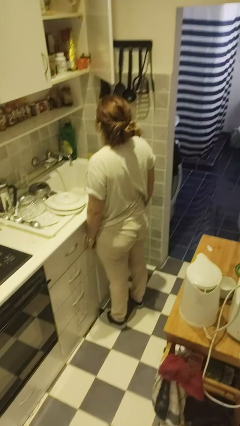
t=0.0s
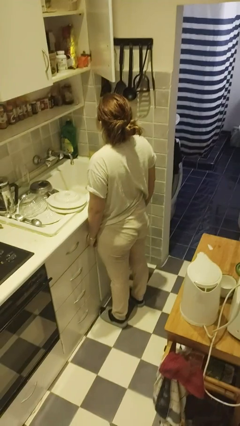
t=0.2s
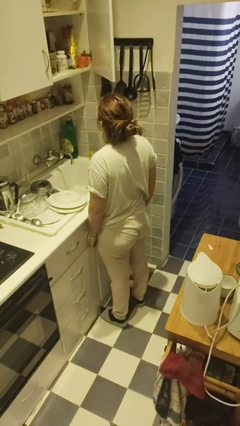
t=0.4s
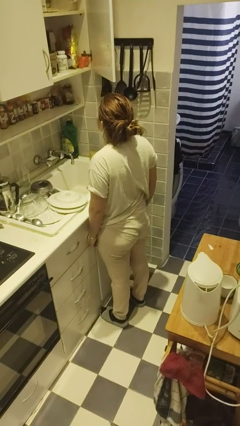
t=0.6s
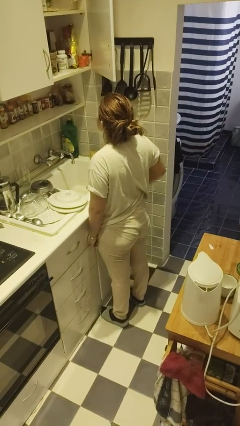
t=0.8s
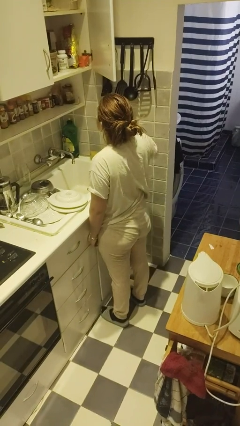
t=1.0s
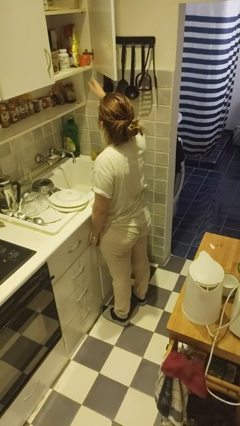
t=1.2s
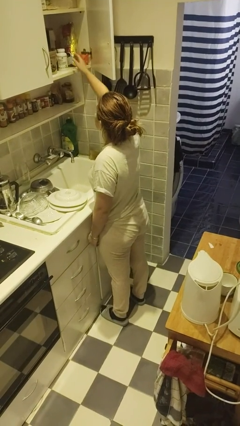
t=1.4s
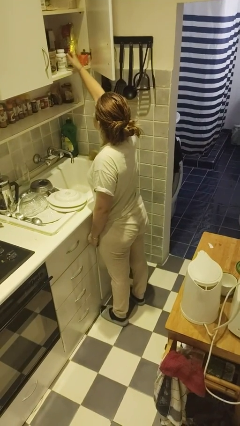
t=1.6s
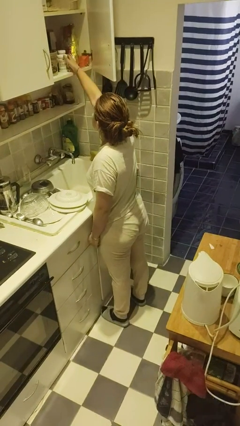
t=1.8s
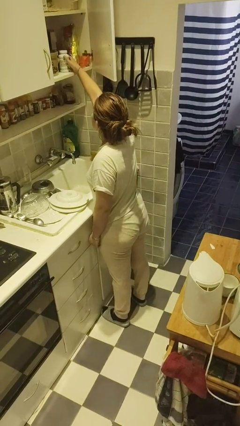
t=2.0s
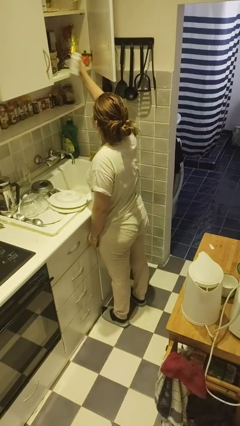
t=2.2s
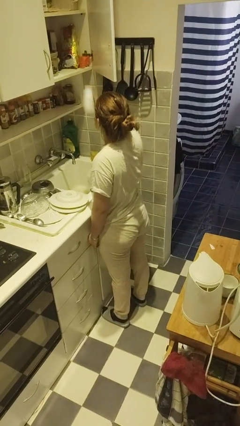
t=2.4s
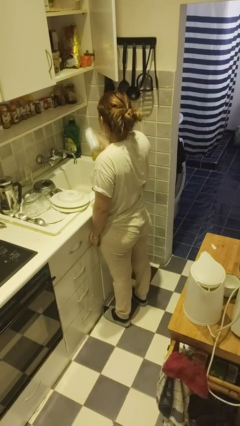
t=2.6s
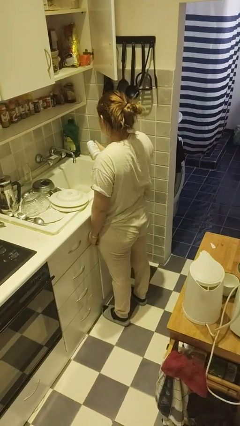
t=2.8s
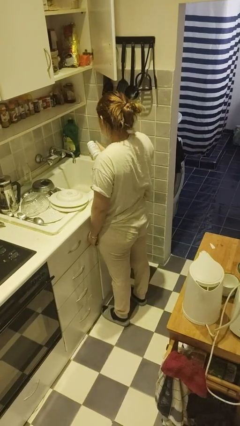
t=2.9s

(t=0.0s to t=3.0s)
person picks up object from cabinet

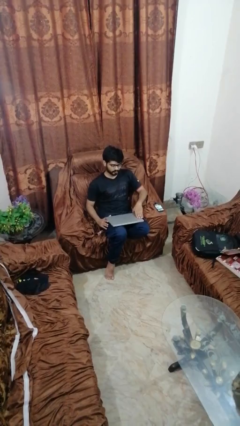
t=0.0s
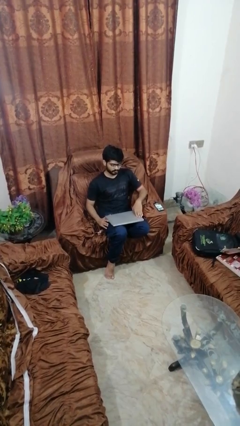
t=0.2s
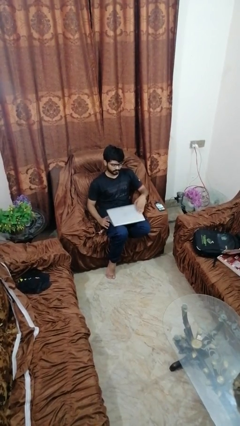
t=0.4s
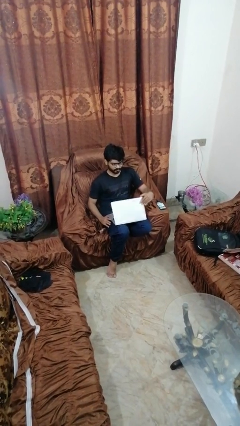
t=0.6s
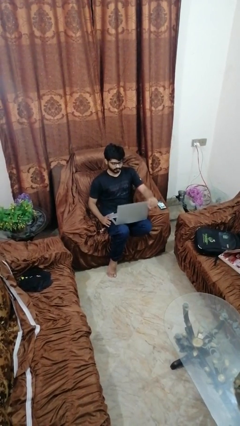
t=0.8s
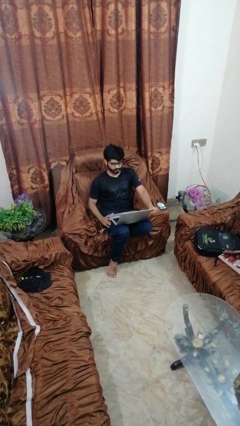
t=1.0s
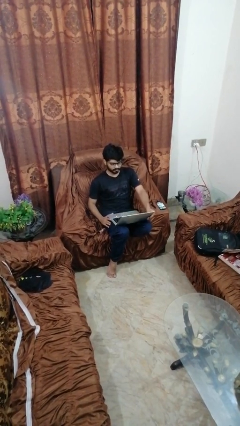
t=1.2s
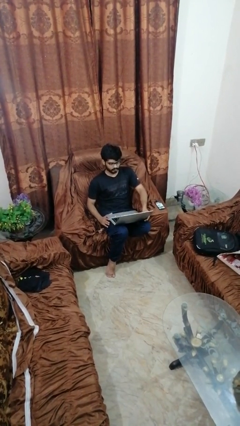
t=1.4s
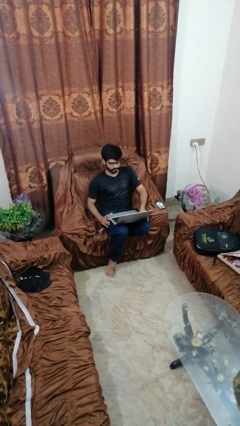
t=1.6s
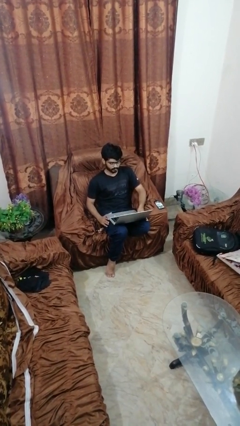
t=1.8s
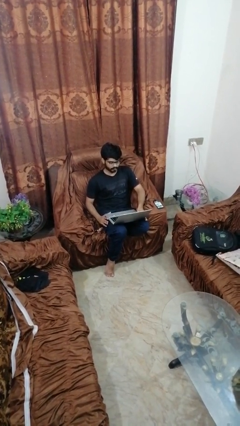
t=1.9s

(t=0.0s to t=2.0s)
person opens laptop

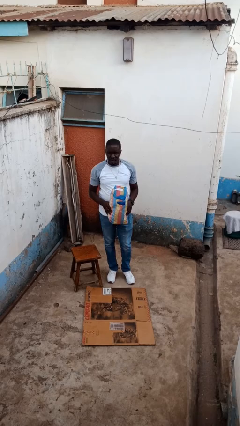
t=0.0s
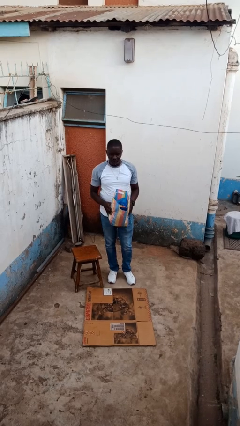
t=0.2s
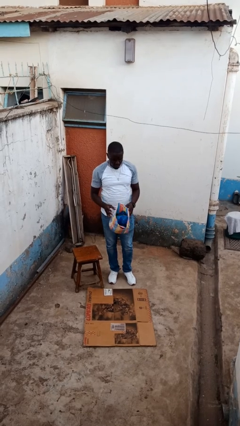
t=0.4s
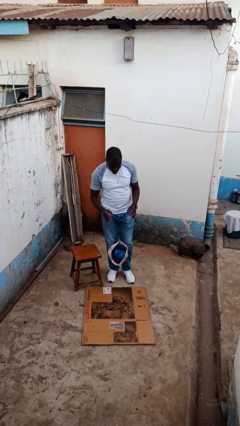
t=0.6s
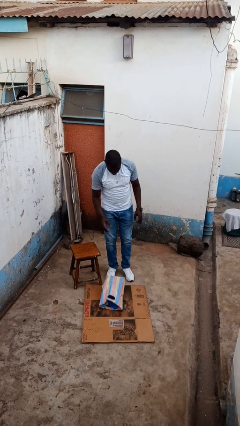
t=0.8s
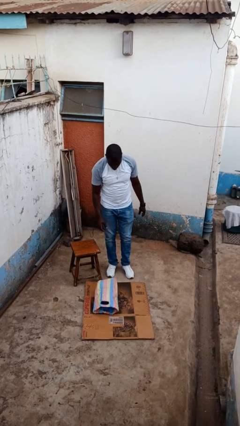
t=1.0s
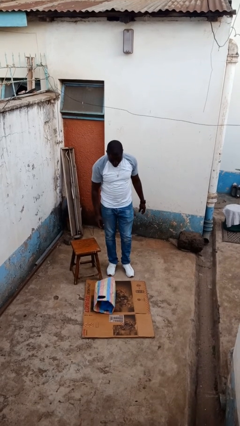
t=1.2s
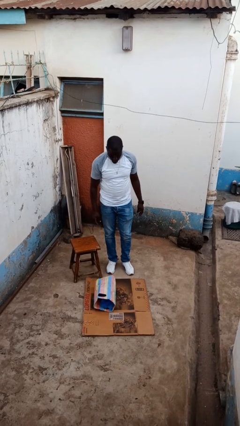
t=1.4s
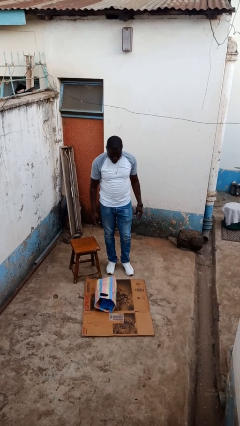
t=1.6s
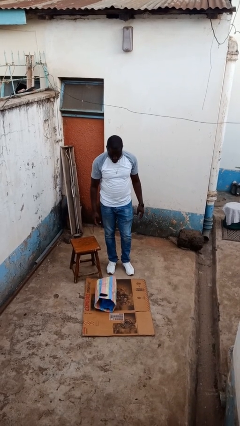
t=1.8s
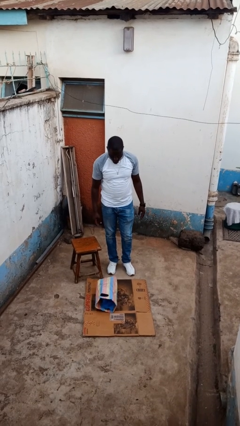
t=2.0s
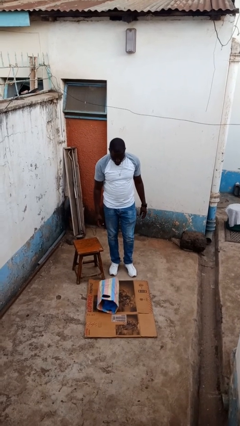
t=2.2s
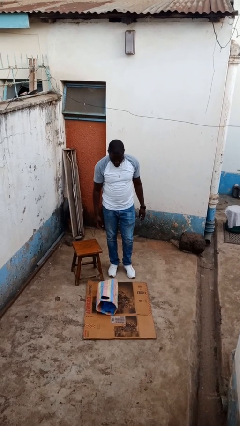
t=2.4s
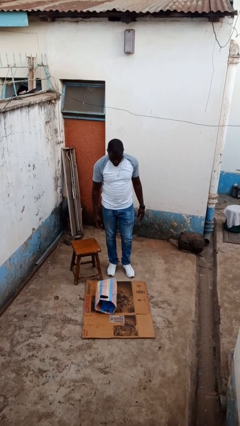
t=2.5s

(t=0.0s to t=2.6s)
person drops object

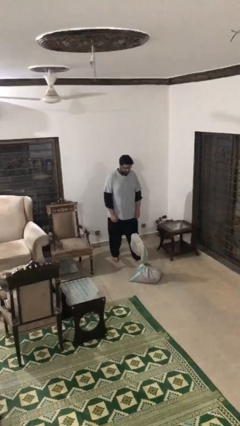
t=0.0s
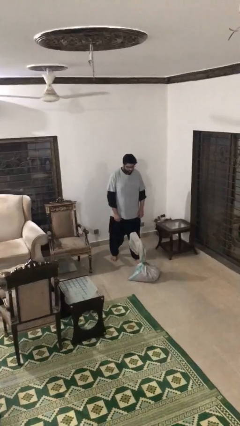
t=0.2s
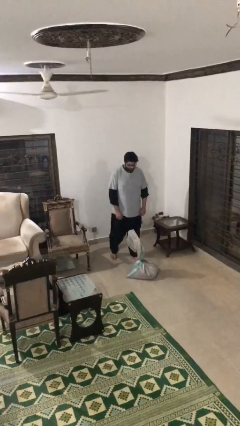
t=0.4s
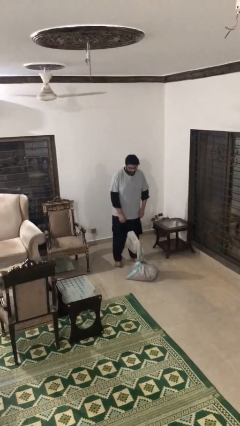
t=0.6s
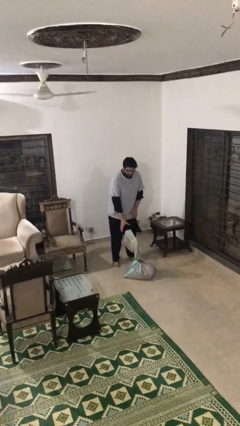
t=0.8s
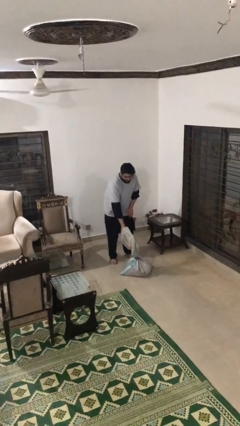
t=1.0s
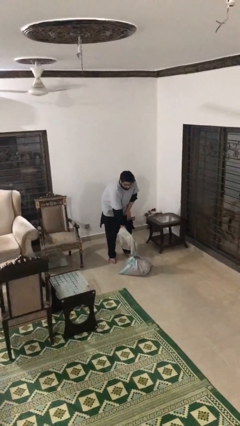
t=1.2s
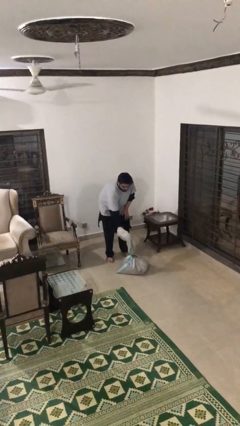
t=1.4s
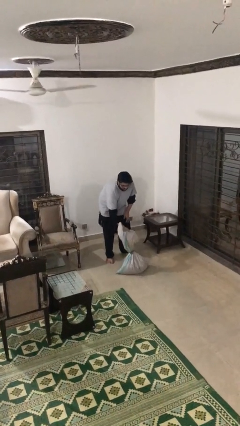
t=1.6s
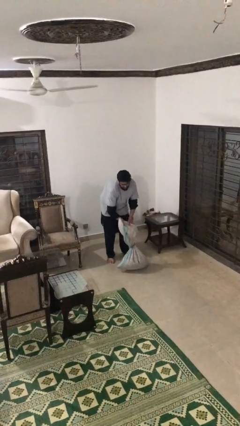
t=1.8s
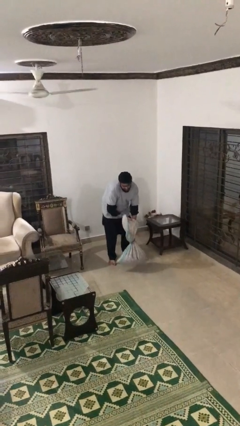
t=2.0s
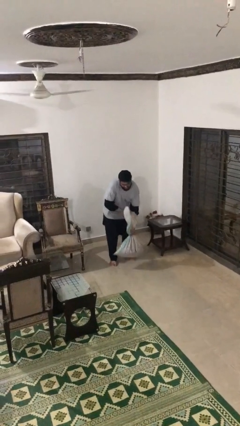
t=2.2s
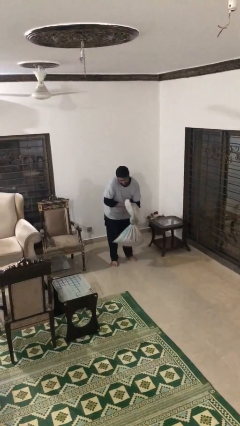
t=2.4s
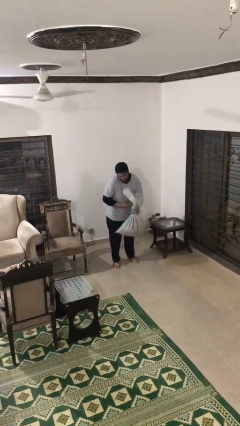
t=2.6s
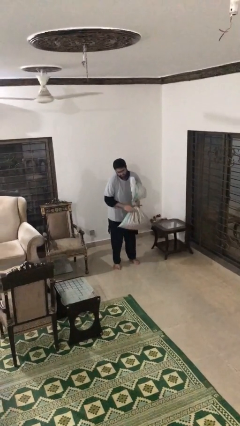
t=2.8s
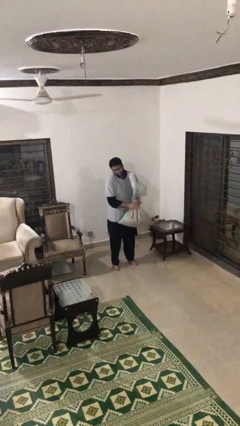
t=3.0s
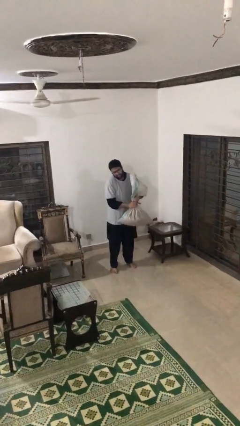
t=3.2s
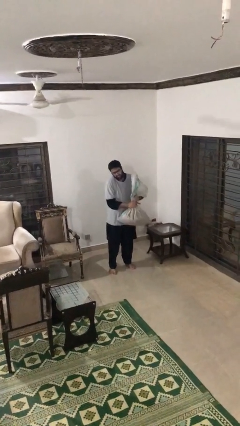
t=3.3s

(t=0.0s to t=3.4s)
person picks up object from floor

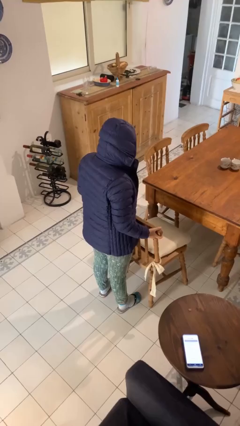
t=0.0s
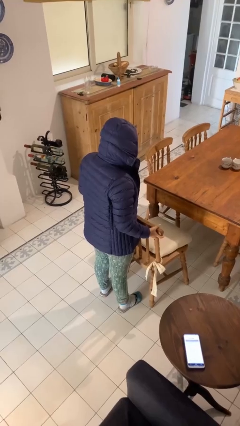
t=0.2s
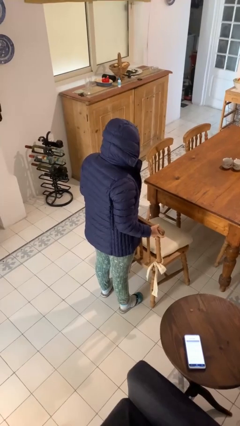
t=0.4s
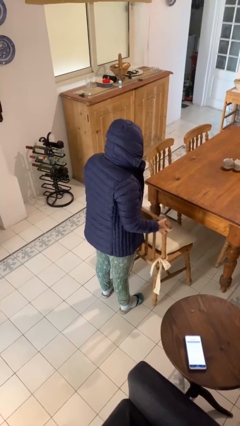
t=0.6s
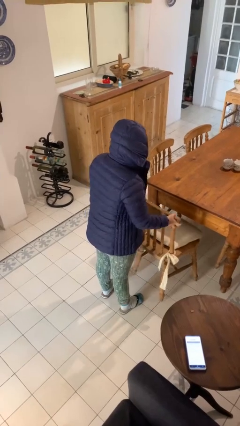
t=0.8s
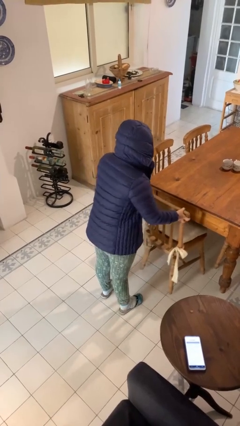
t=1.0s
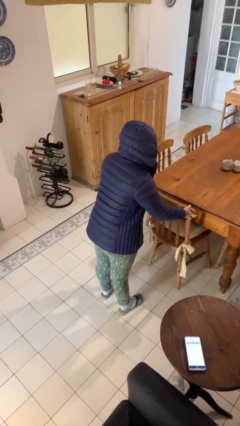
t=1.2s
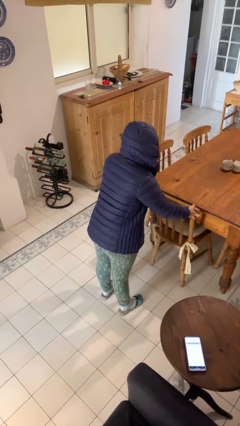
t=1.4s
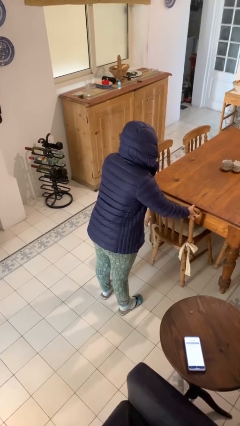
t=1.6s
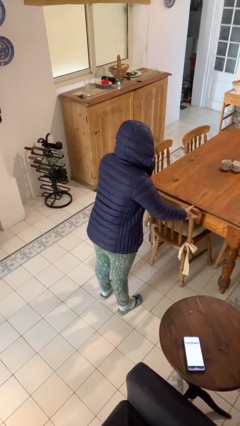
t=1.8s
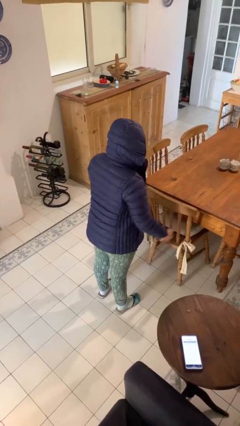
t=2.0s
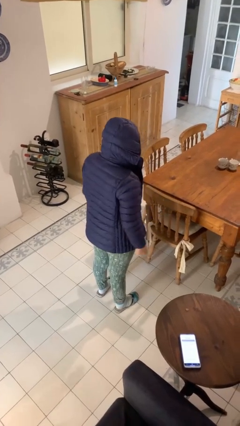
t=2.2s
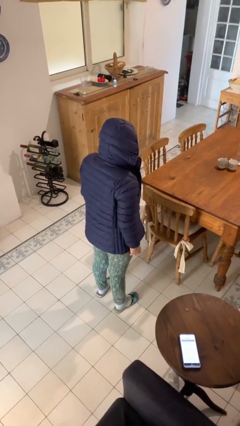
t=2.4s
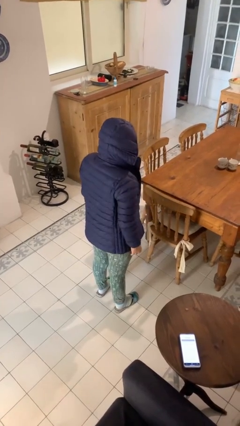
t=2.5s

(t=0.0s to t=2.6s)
person pushes in chair

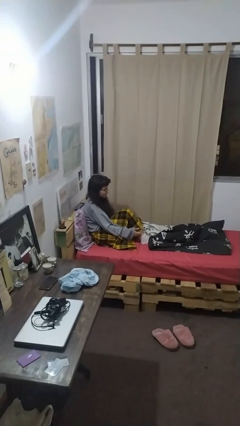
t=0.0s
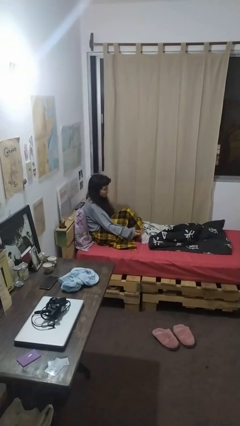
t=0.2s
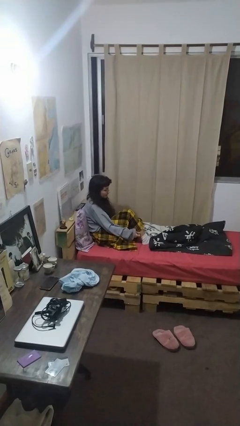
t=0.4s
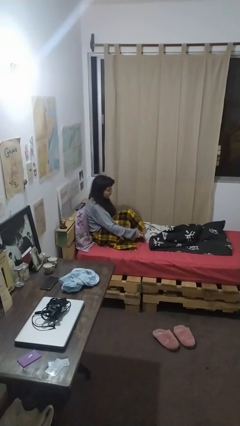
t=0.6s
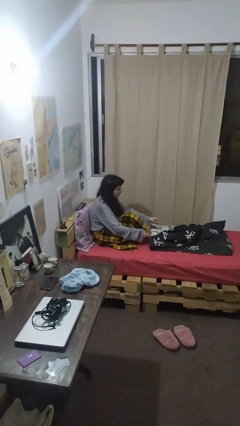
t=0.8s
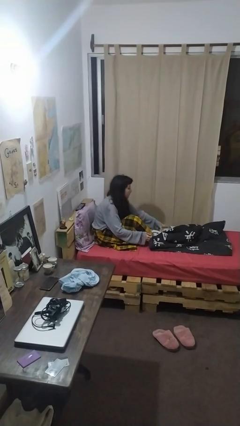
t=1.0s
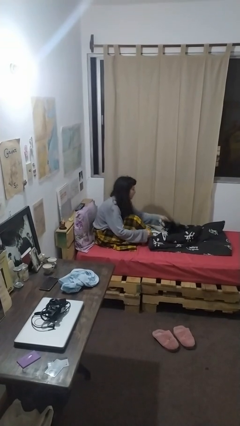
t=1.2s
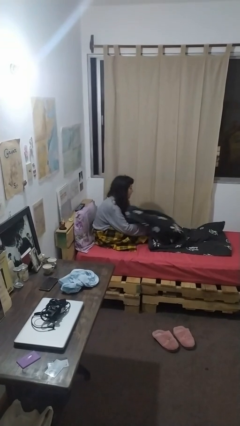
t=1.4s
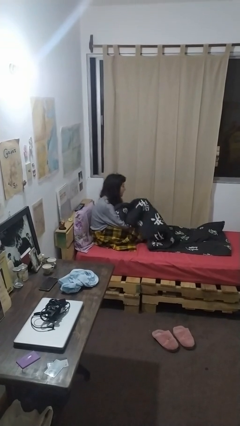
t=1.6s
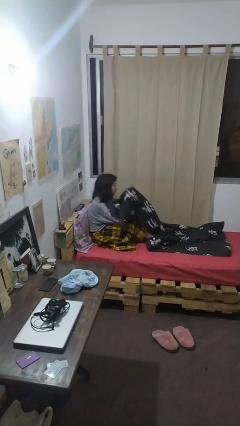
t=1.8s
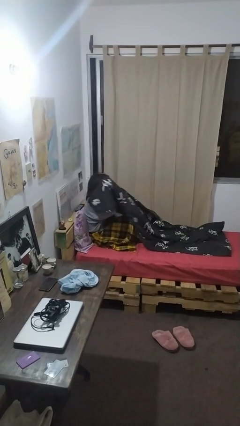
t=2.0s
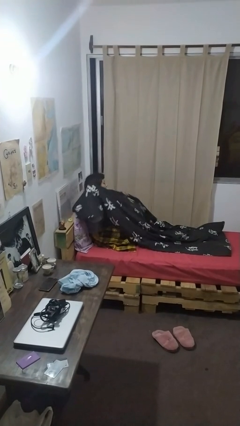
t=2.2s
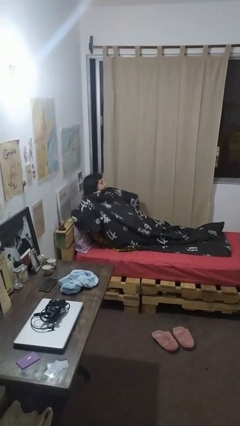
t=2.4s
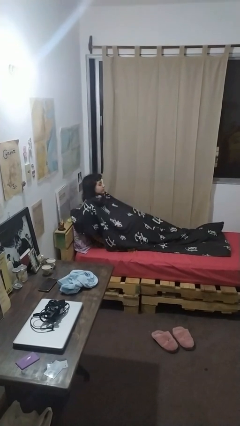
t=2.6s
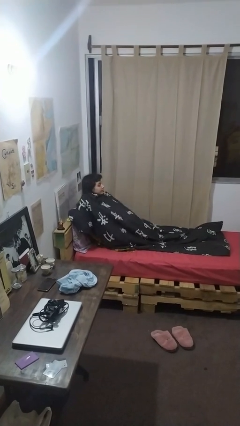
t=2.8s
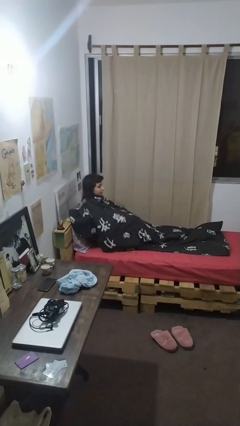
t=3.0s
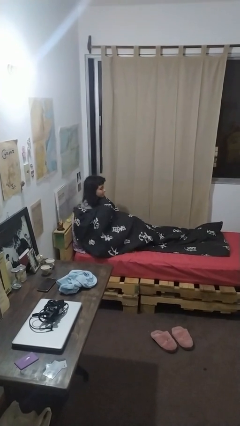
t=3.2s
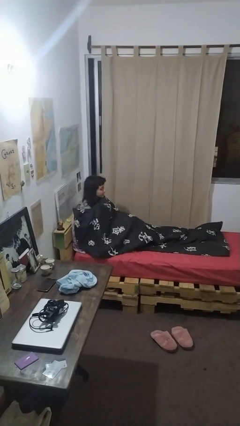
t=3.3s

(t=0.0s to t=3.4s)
person covers with blanket

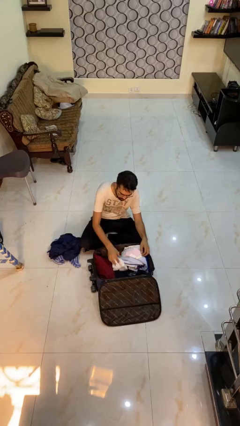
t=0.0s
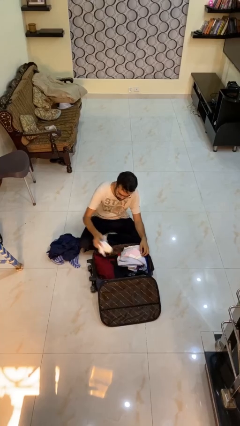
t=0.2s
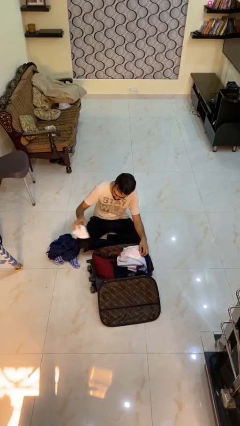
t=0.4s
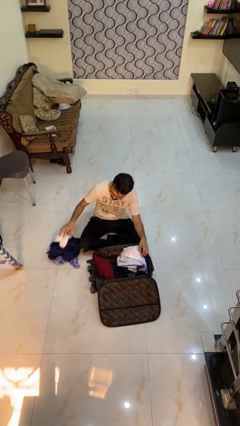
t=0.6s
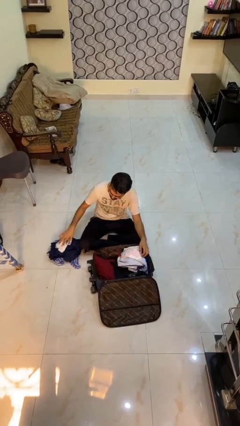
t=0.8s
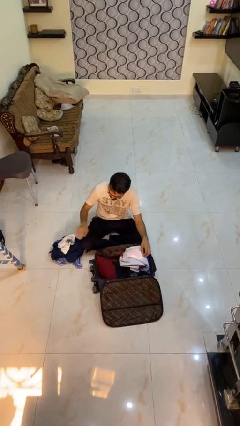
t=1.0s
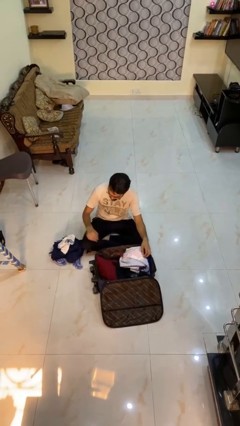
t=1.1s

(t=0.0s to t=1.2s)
person unloads clothes from suitcase
